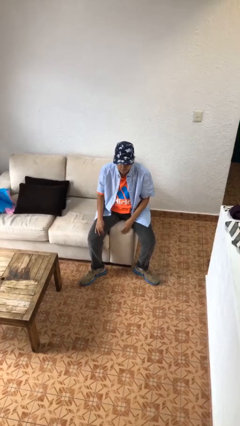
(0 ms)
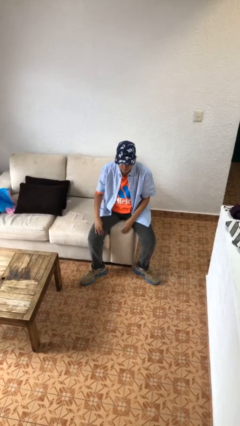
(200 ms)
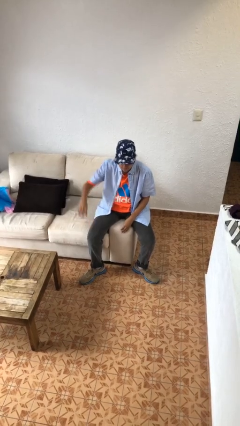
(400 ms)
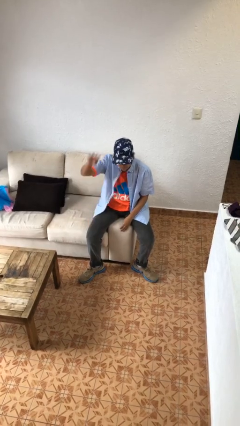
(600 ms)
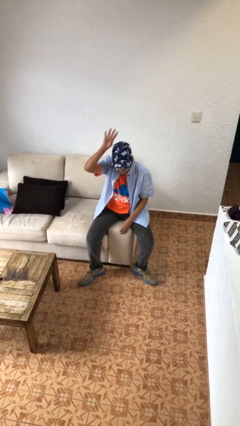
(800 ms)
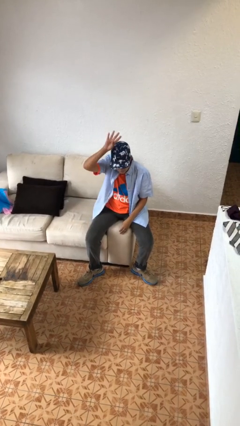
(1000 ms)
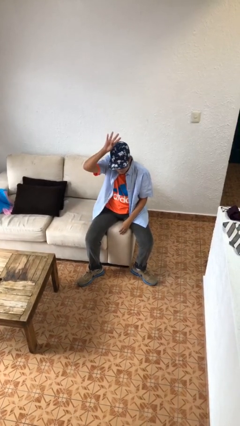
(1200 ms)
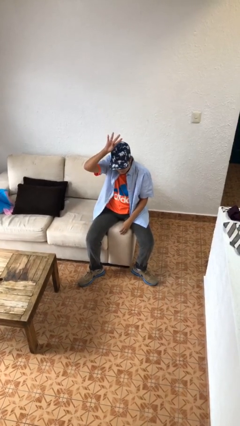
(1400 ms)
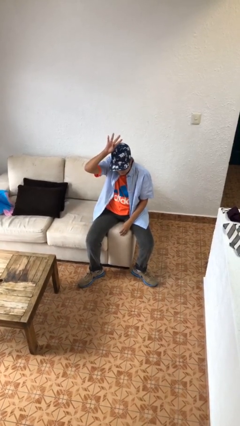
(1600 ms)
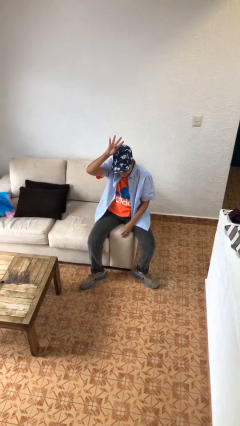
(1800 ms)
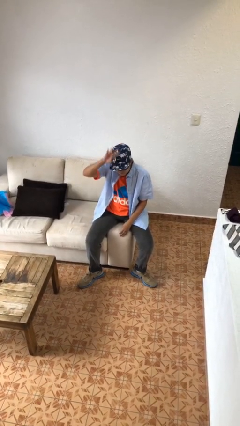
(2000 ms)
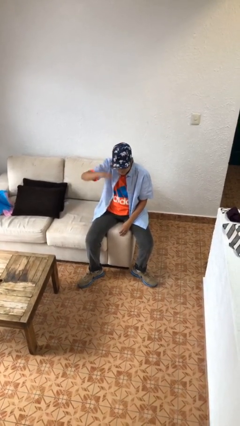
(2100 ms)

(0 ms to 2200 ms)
person gestures number four

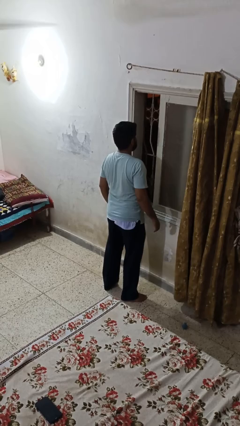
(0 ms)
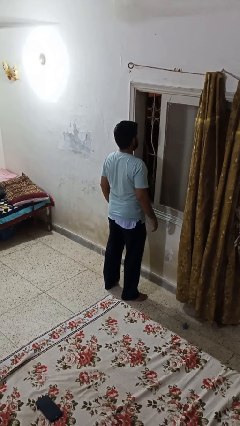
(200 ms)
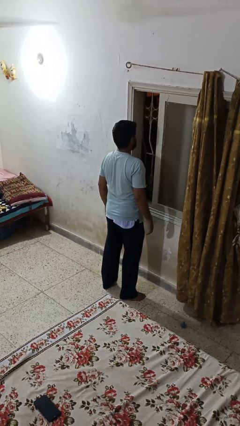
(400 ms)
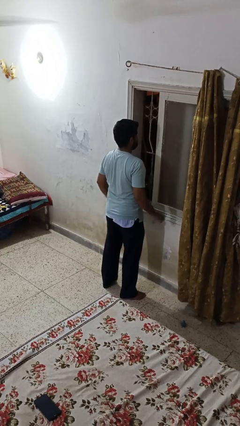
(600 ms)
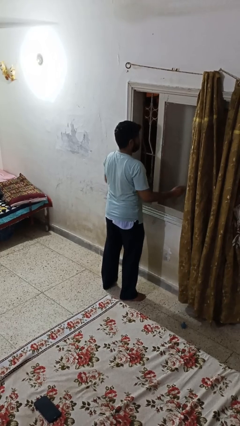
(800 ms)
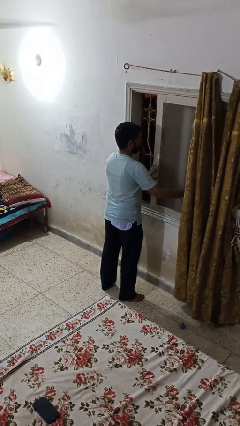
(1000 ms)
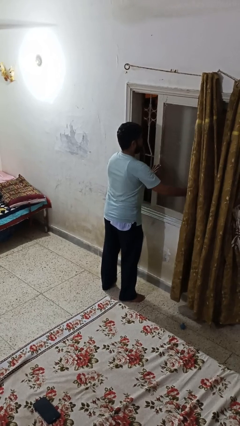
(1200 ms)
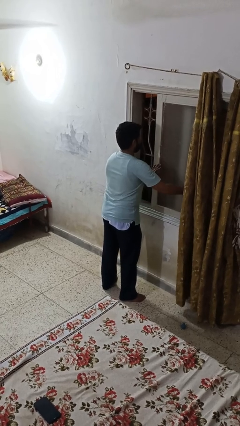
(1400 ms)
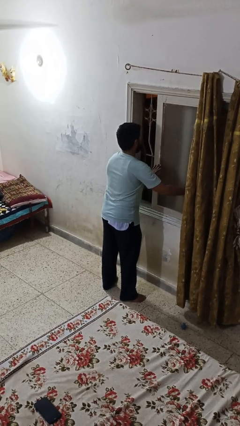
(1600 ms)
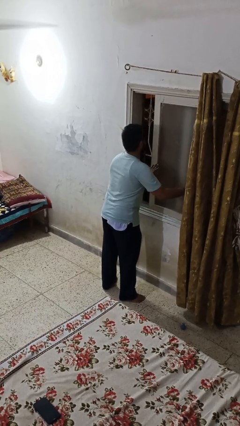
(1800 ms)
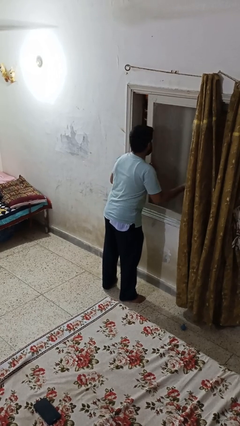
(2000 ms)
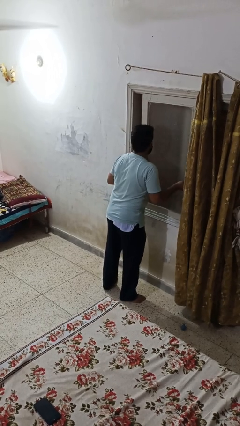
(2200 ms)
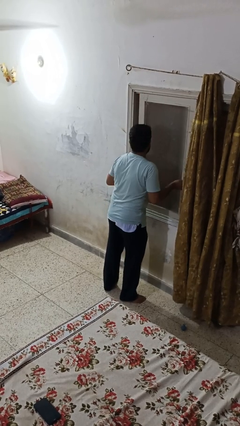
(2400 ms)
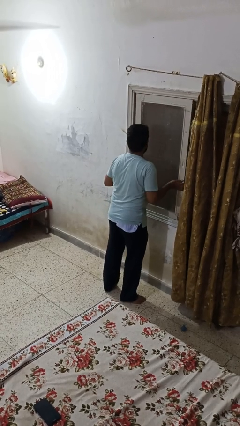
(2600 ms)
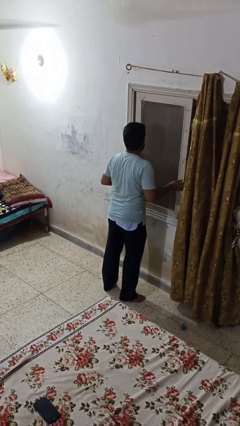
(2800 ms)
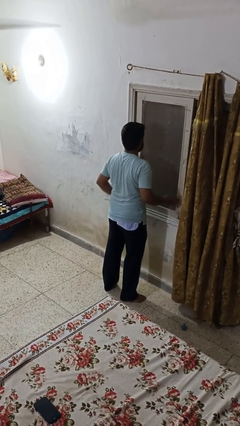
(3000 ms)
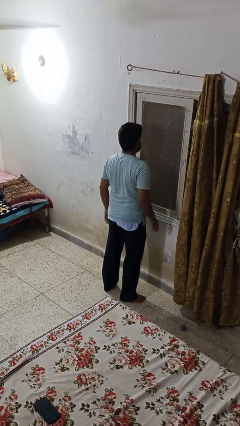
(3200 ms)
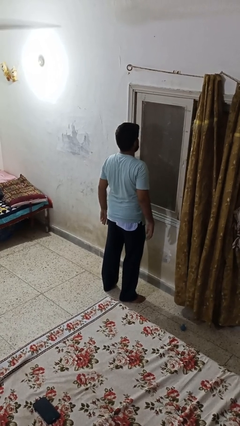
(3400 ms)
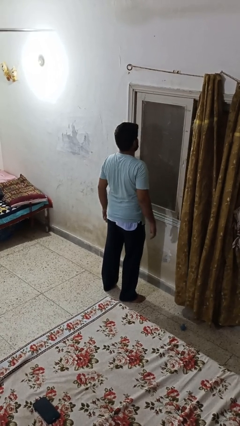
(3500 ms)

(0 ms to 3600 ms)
person closes sliding door

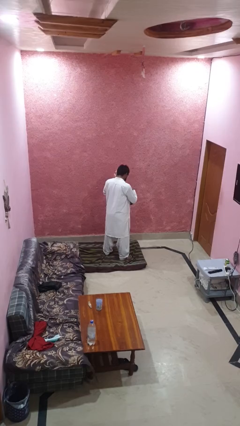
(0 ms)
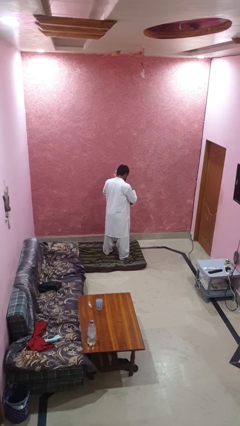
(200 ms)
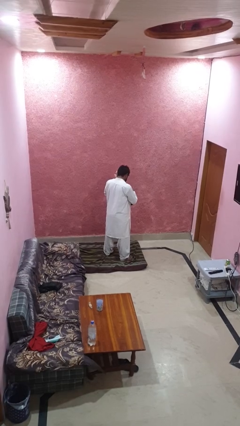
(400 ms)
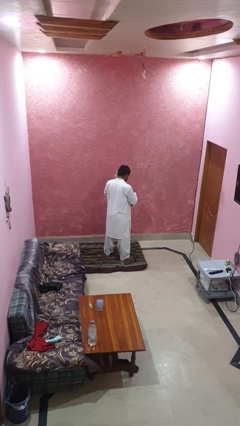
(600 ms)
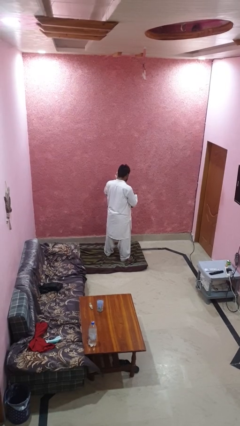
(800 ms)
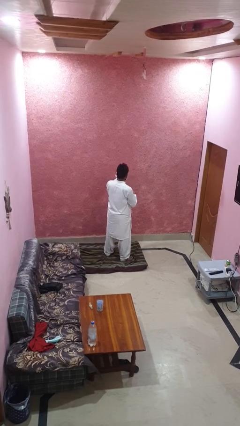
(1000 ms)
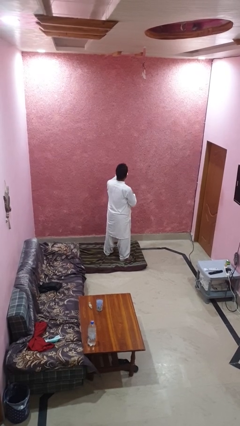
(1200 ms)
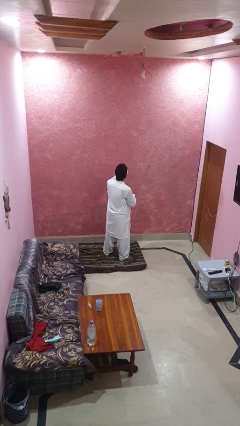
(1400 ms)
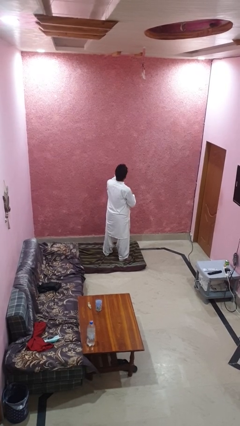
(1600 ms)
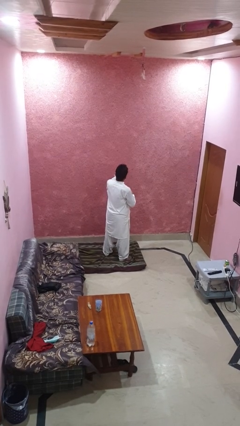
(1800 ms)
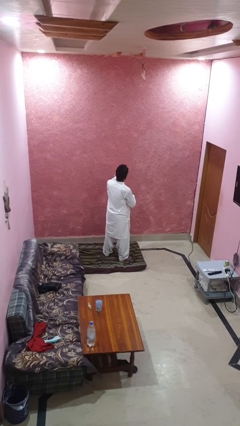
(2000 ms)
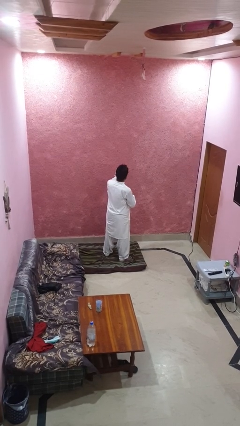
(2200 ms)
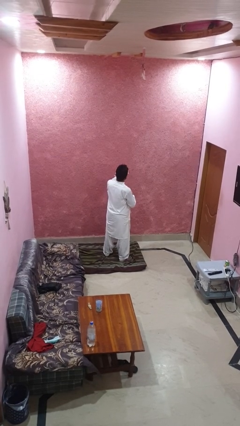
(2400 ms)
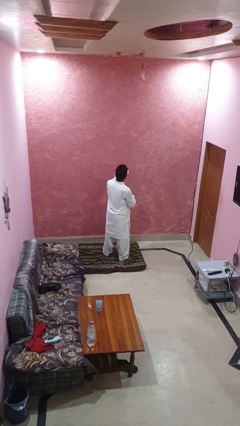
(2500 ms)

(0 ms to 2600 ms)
person takes object from purse

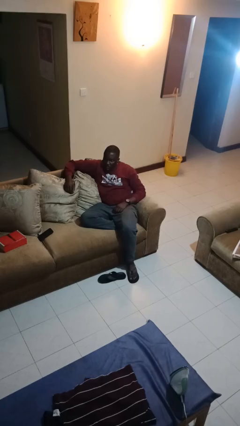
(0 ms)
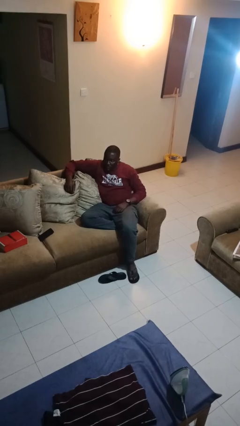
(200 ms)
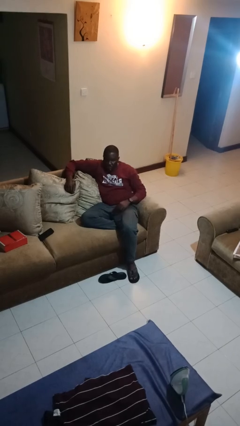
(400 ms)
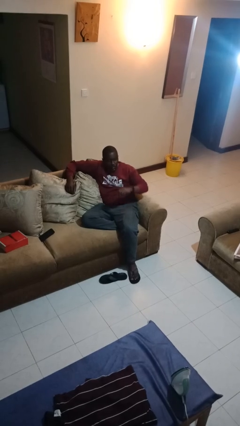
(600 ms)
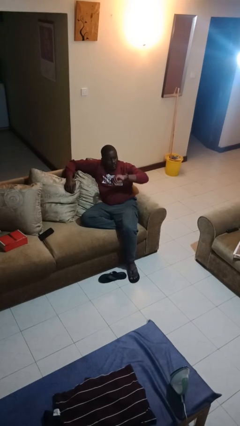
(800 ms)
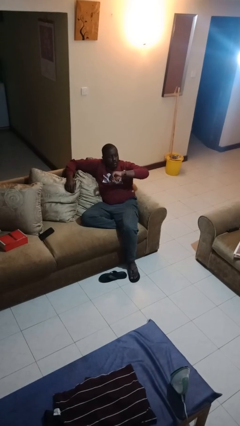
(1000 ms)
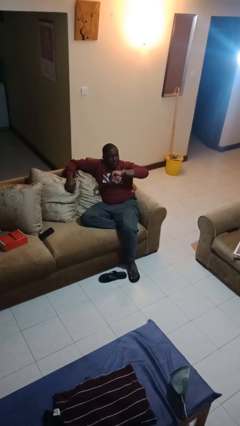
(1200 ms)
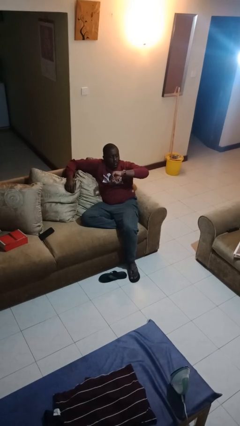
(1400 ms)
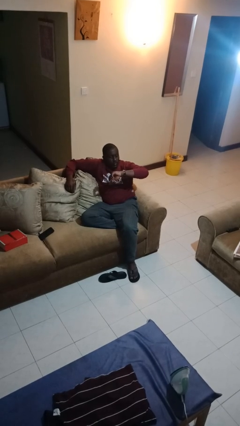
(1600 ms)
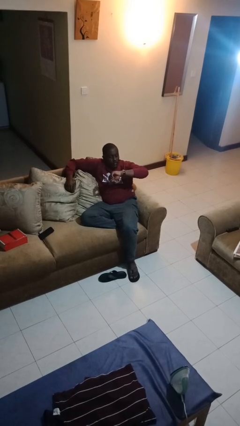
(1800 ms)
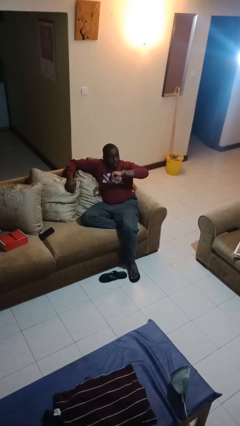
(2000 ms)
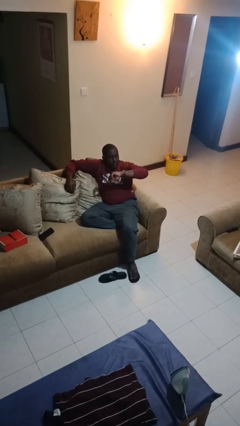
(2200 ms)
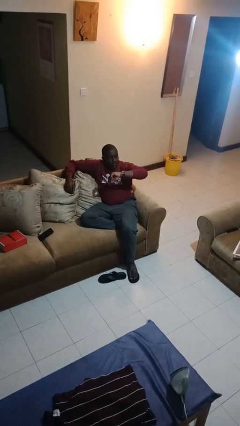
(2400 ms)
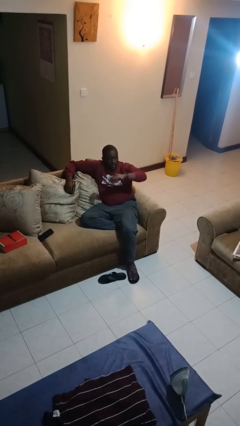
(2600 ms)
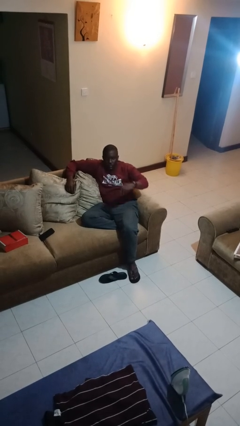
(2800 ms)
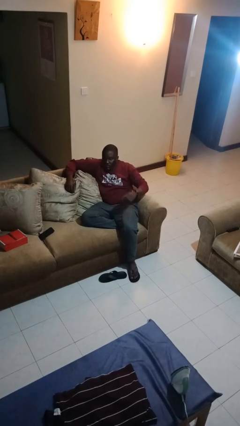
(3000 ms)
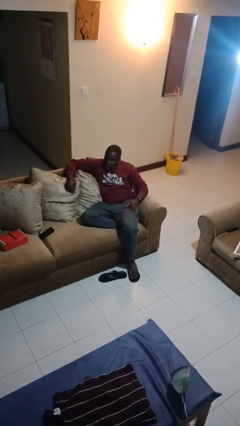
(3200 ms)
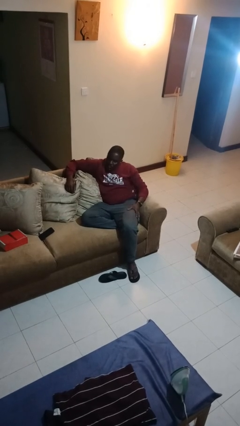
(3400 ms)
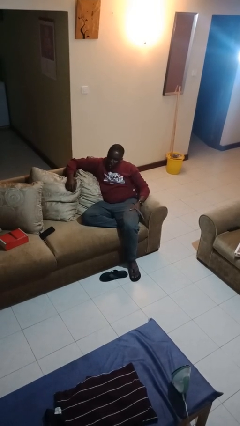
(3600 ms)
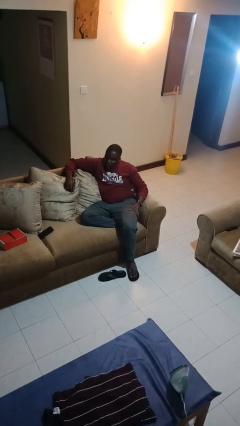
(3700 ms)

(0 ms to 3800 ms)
person looks at wristwatch

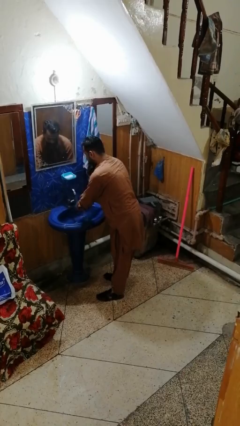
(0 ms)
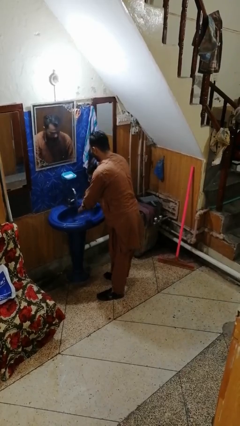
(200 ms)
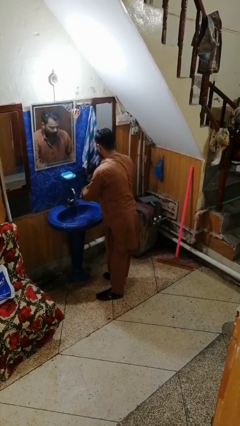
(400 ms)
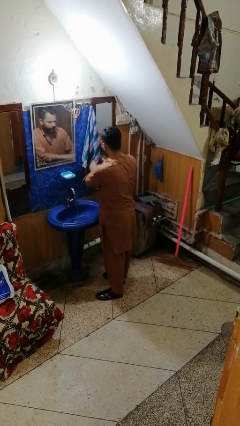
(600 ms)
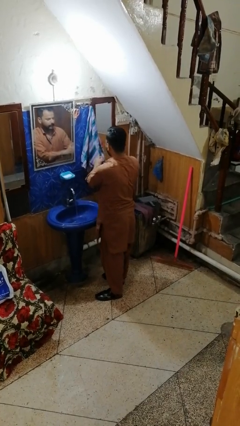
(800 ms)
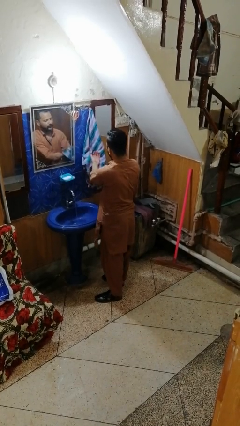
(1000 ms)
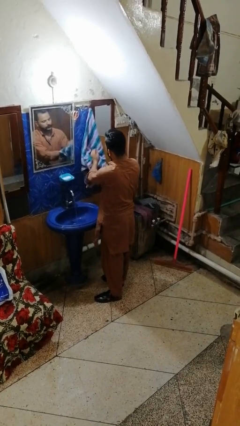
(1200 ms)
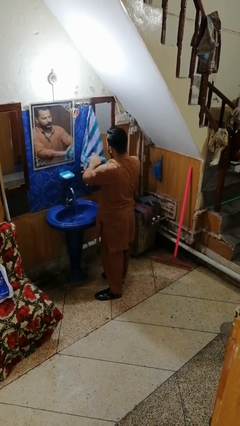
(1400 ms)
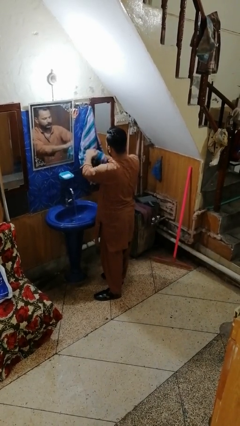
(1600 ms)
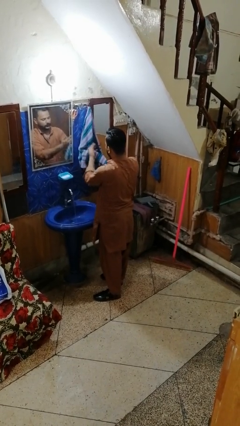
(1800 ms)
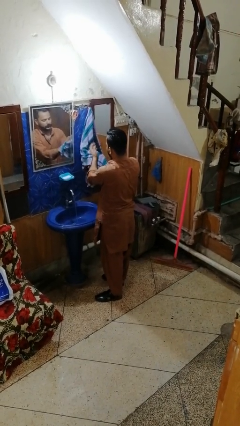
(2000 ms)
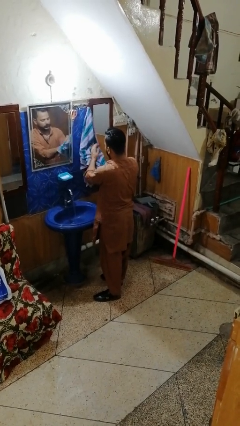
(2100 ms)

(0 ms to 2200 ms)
person dries hands with towel

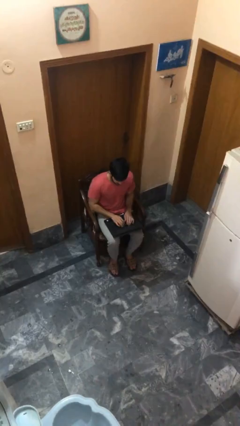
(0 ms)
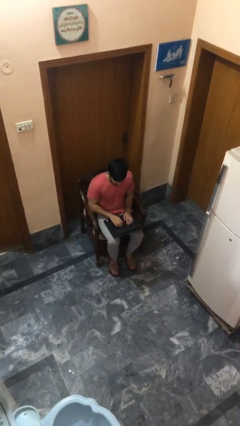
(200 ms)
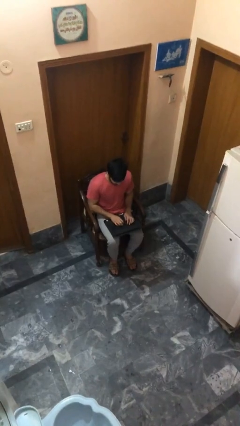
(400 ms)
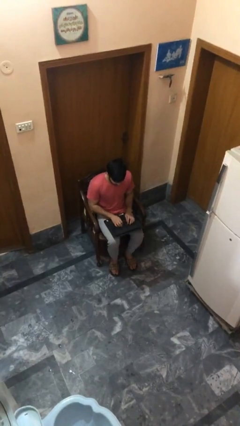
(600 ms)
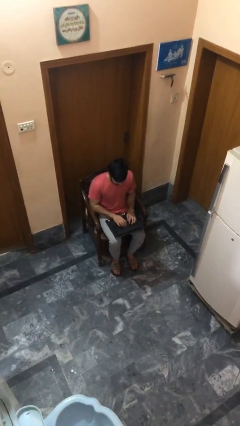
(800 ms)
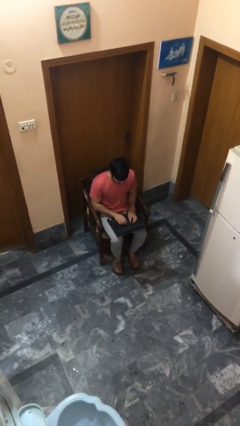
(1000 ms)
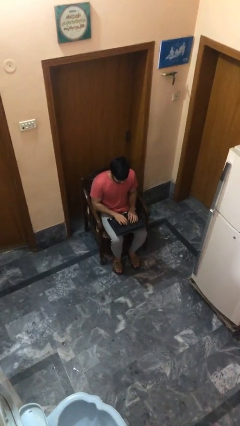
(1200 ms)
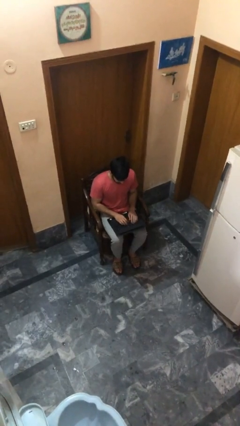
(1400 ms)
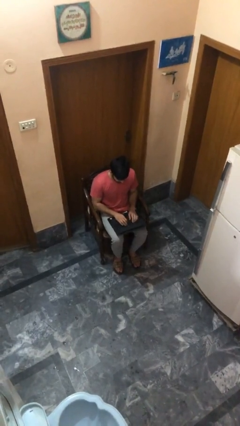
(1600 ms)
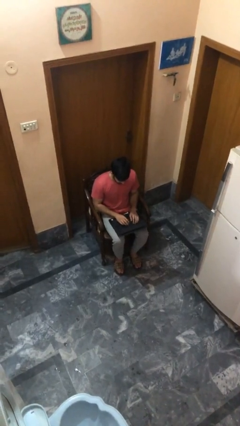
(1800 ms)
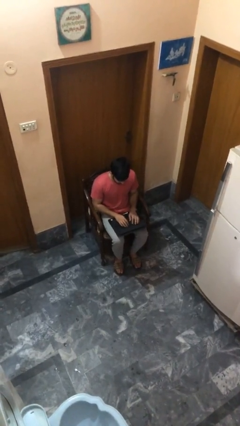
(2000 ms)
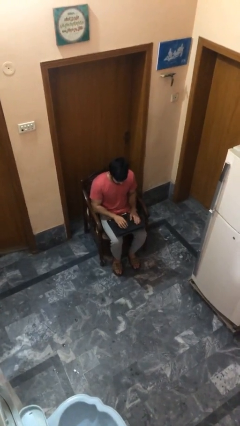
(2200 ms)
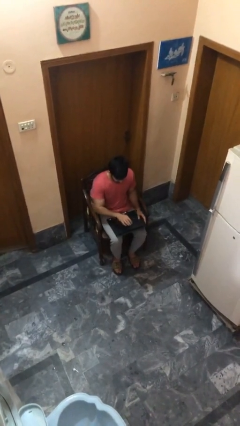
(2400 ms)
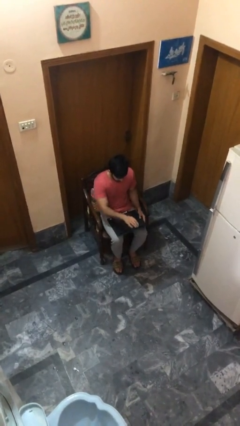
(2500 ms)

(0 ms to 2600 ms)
person interacts with laptop

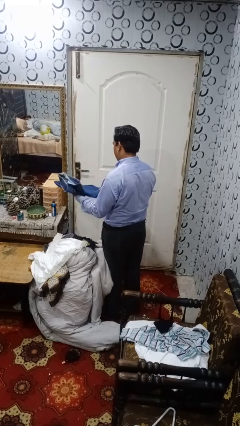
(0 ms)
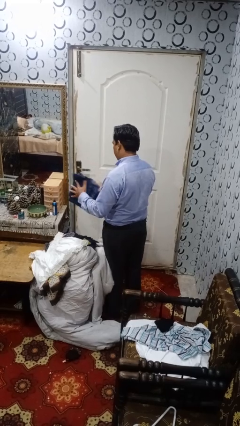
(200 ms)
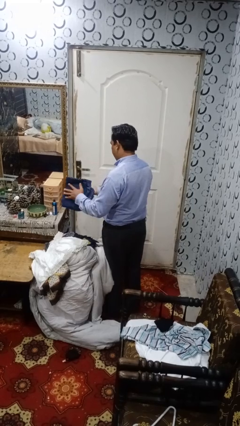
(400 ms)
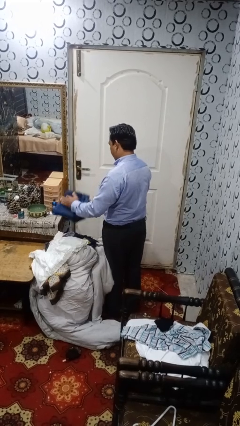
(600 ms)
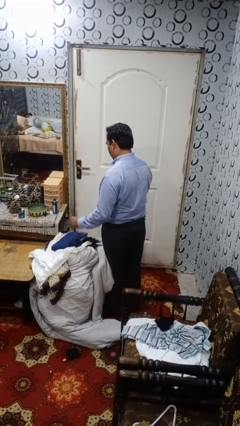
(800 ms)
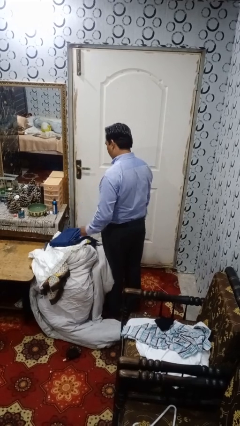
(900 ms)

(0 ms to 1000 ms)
person folds pants
